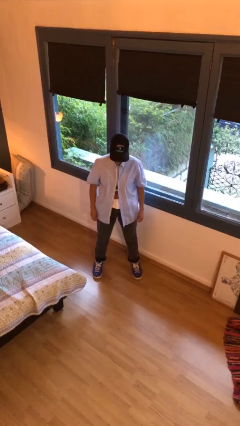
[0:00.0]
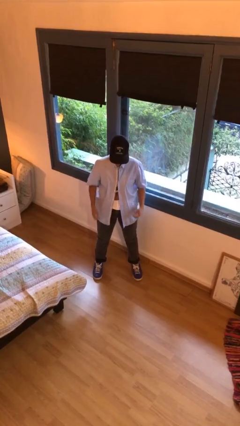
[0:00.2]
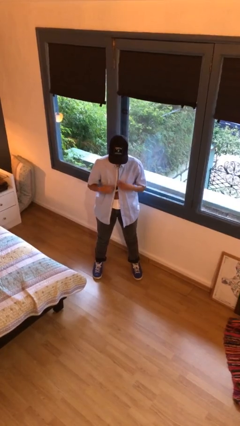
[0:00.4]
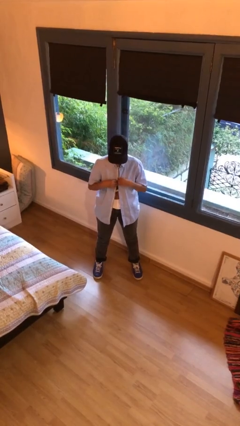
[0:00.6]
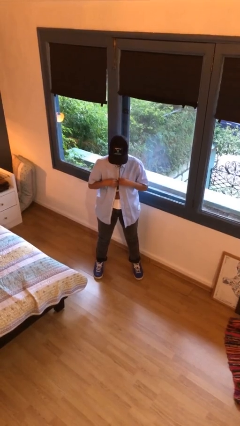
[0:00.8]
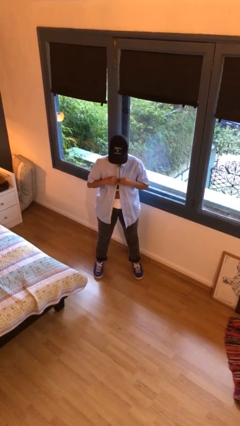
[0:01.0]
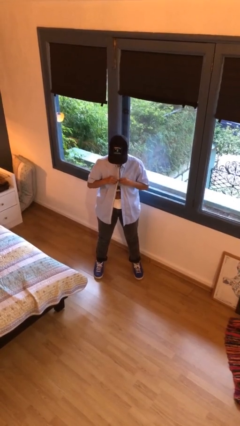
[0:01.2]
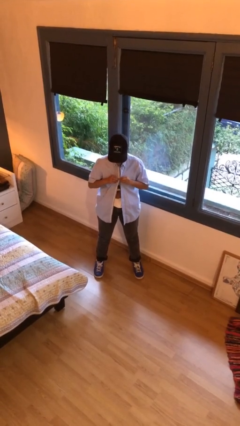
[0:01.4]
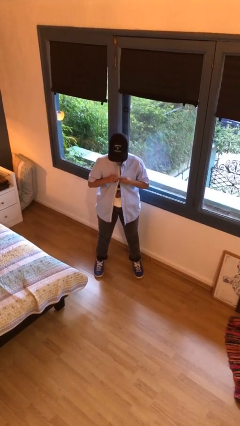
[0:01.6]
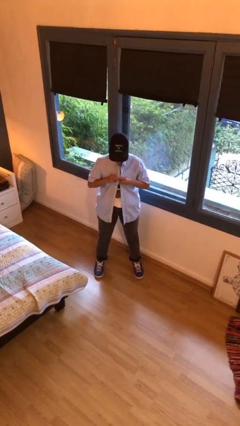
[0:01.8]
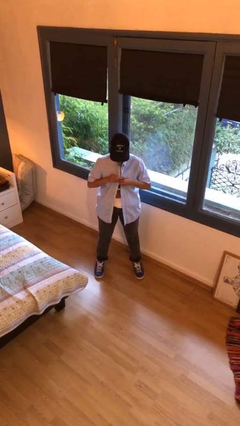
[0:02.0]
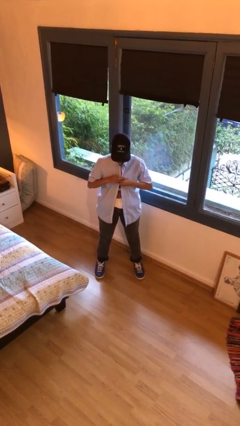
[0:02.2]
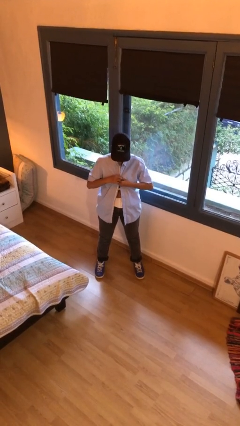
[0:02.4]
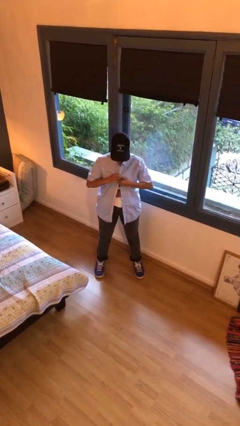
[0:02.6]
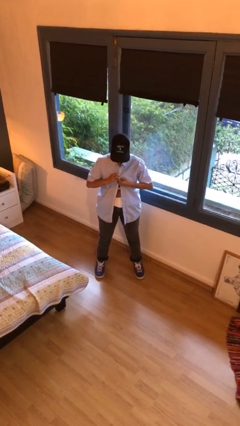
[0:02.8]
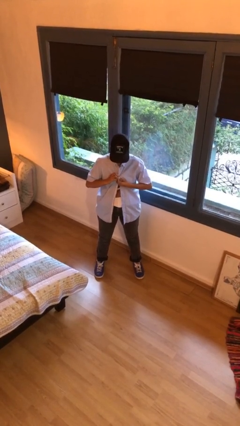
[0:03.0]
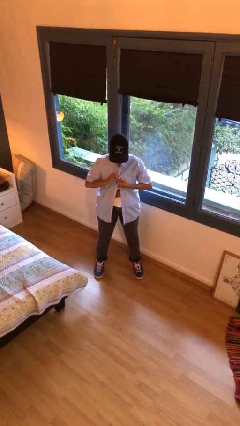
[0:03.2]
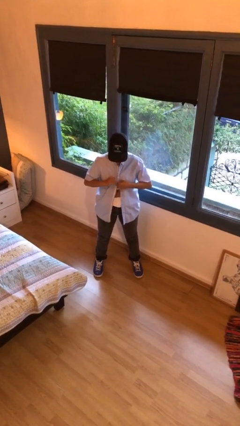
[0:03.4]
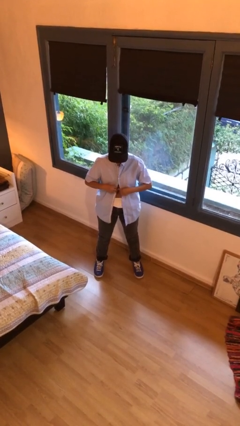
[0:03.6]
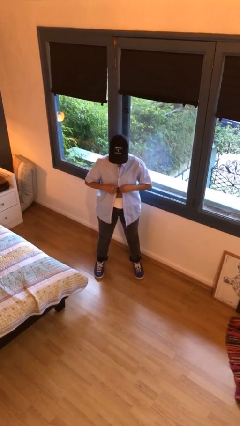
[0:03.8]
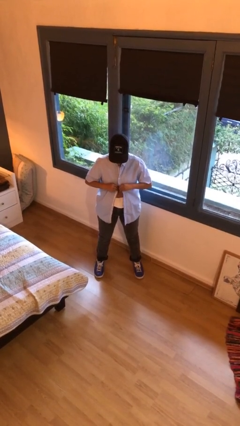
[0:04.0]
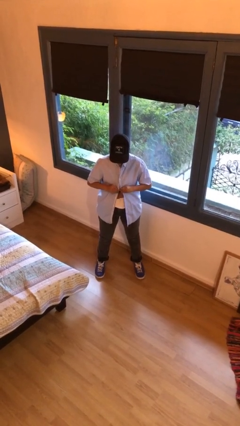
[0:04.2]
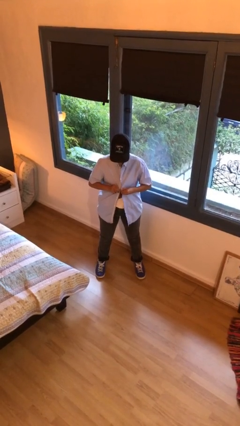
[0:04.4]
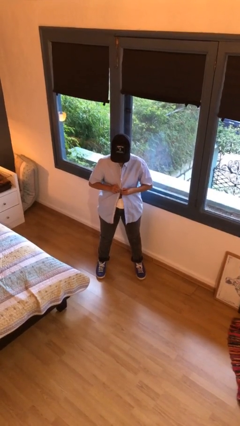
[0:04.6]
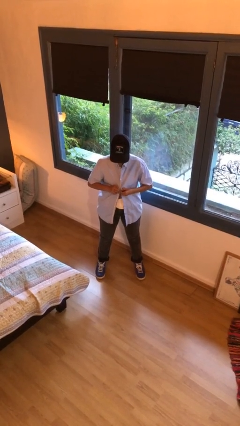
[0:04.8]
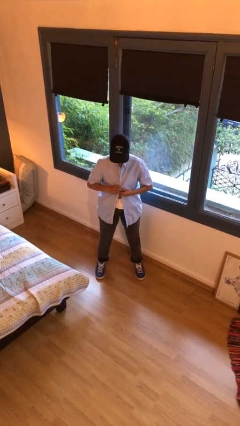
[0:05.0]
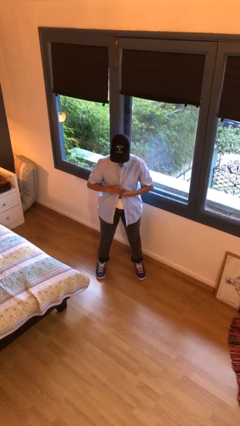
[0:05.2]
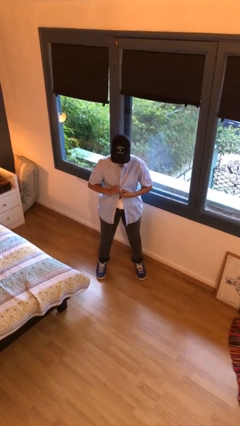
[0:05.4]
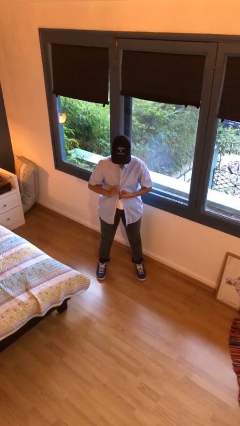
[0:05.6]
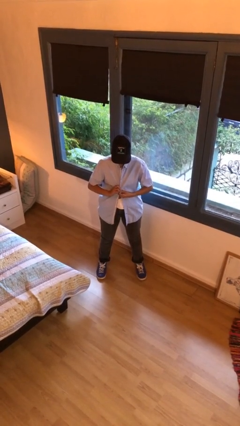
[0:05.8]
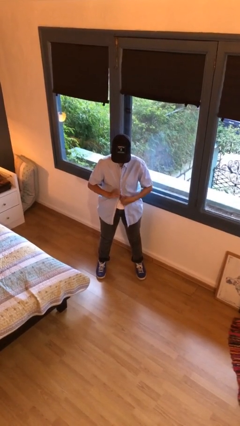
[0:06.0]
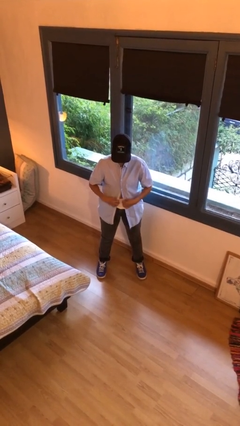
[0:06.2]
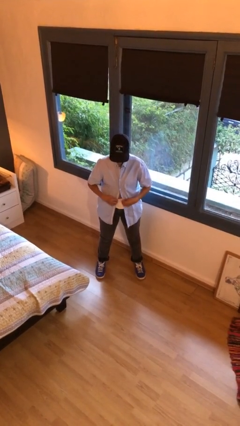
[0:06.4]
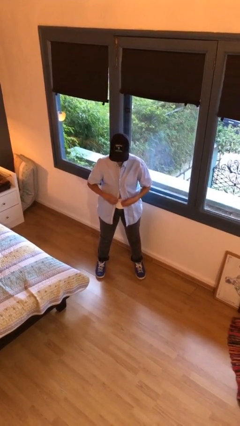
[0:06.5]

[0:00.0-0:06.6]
person buttons shirt

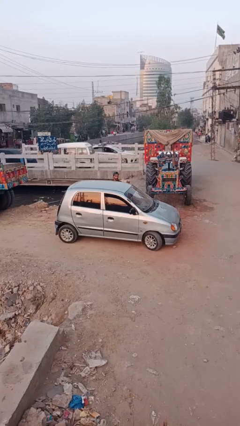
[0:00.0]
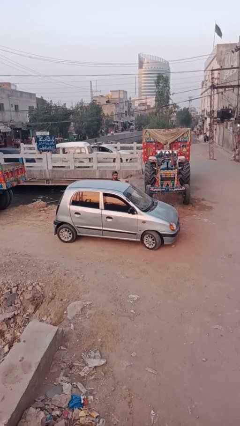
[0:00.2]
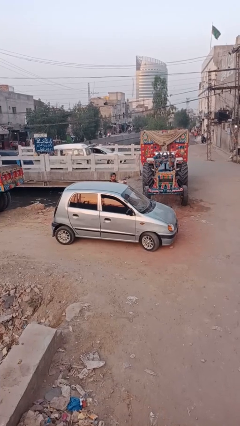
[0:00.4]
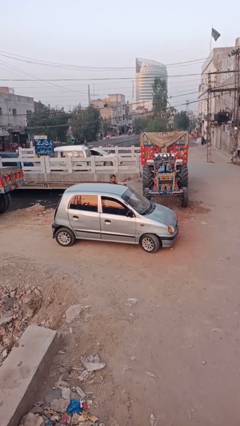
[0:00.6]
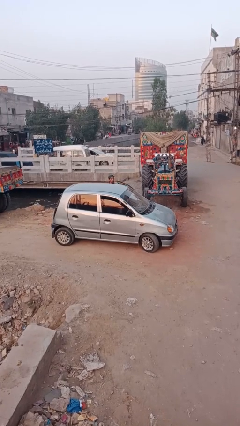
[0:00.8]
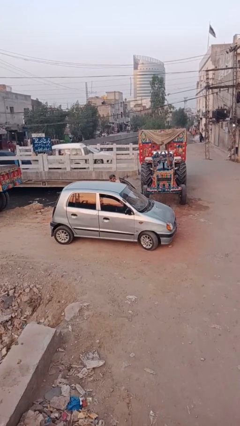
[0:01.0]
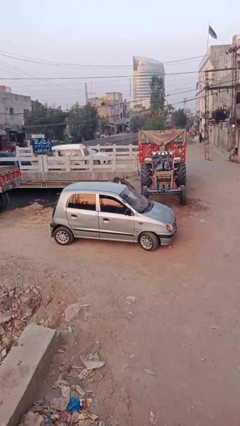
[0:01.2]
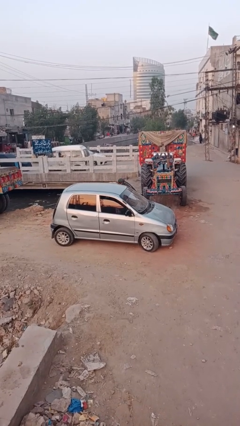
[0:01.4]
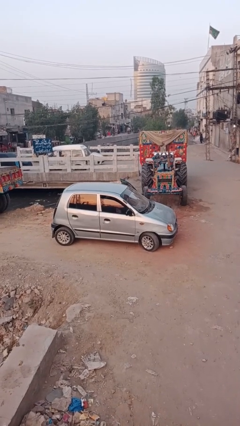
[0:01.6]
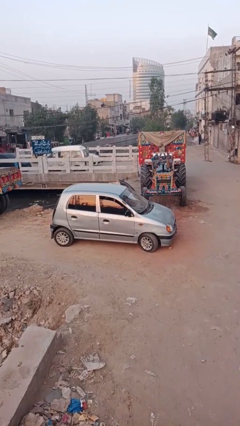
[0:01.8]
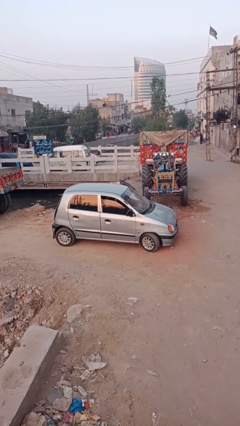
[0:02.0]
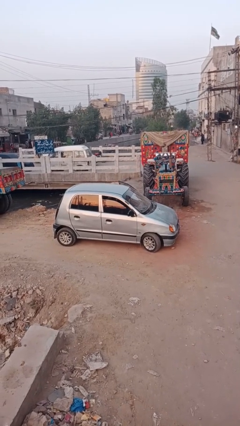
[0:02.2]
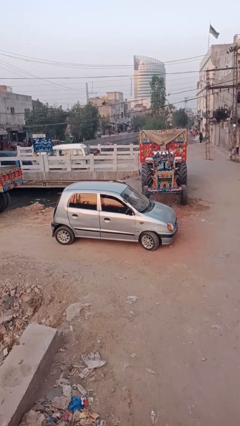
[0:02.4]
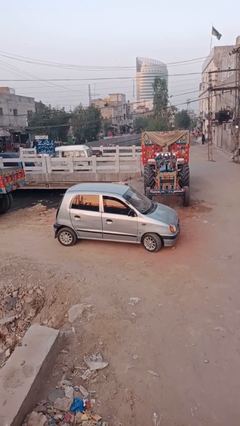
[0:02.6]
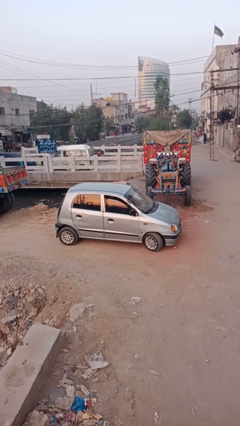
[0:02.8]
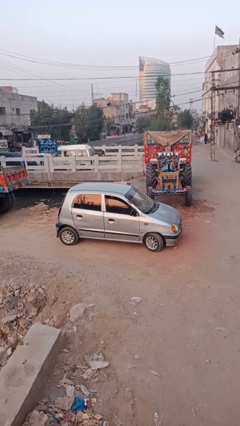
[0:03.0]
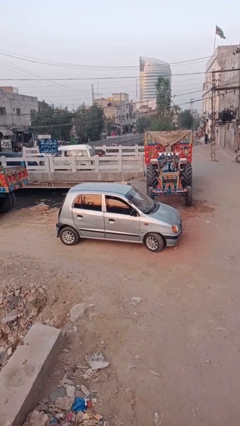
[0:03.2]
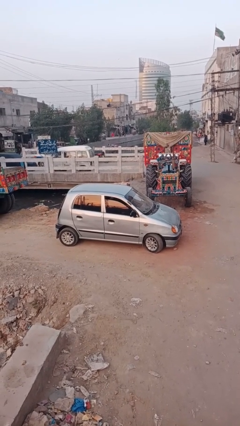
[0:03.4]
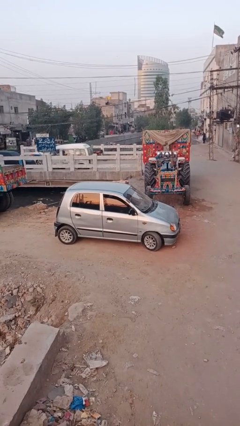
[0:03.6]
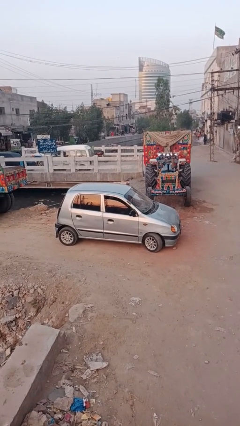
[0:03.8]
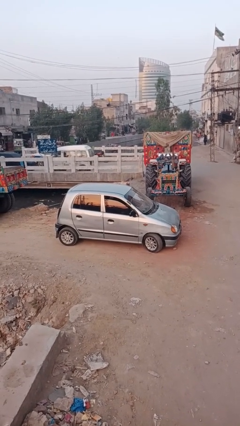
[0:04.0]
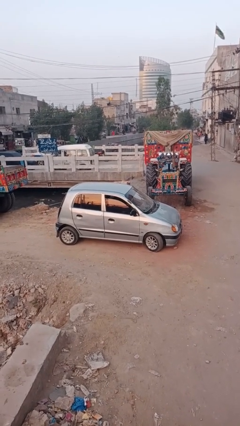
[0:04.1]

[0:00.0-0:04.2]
car picks up person

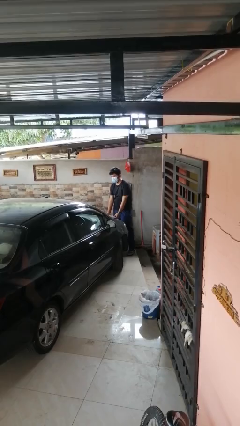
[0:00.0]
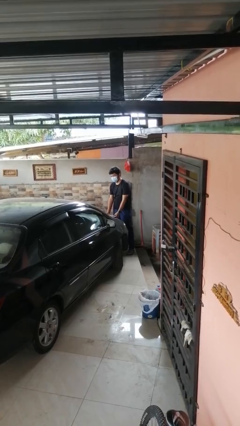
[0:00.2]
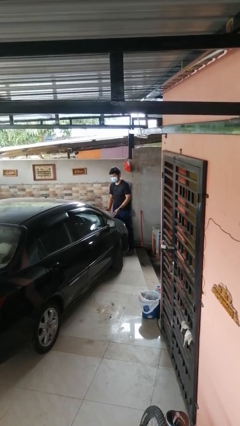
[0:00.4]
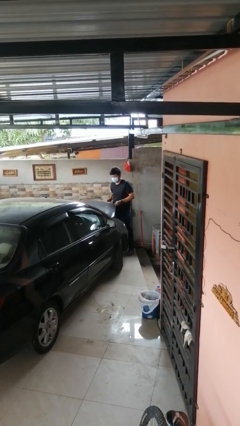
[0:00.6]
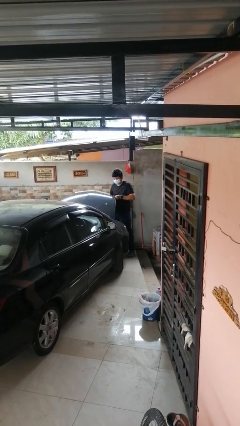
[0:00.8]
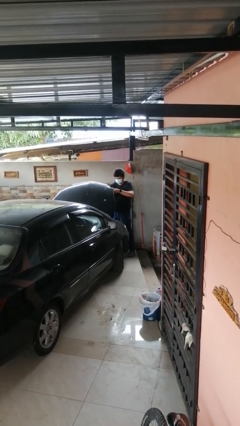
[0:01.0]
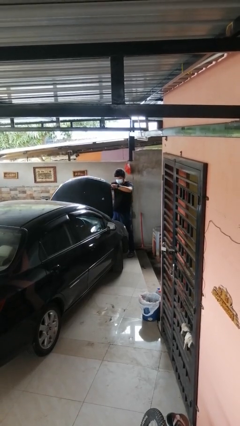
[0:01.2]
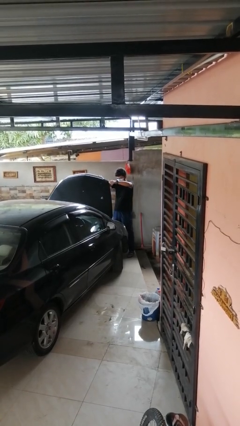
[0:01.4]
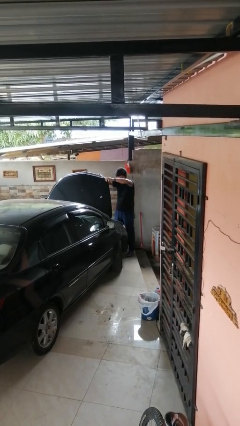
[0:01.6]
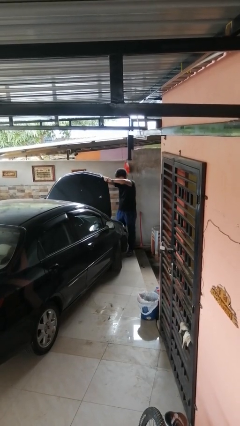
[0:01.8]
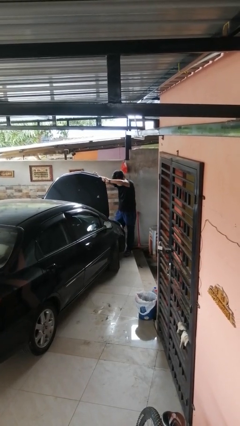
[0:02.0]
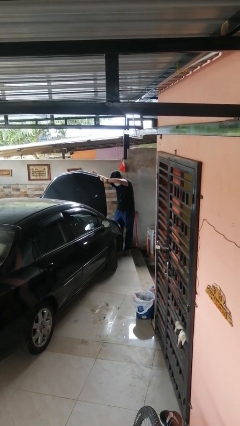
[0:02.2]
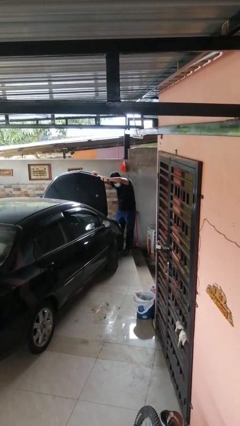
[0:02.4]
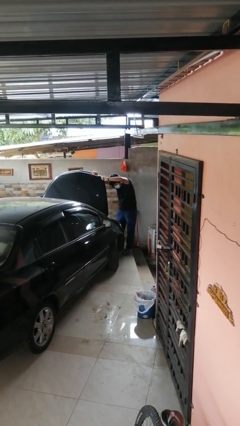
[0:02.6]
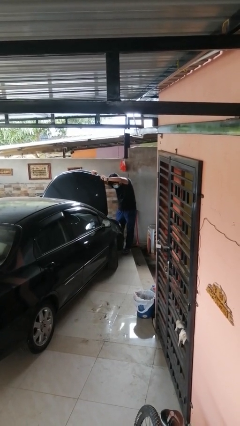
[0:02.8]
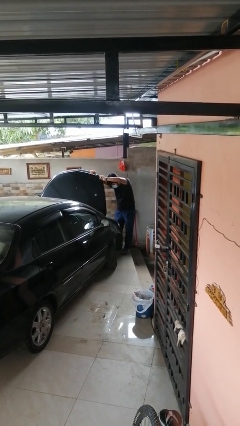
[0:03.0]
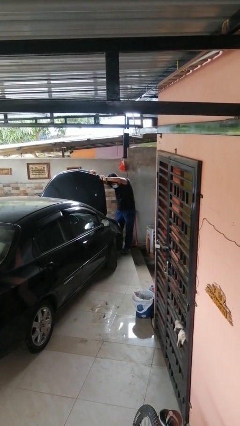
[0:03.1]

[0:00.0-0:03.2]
person opens car hood

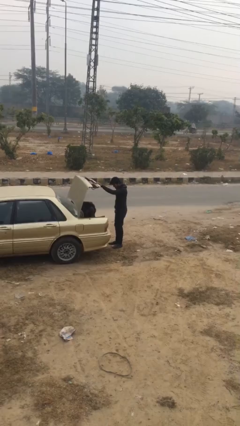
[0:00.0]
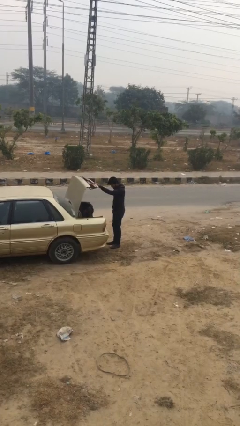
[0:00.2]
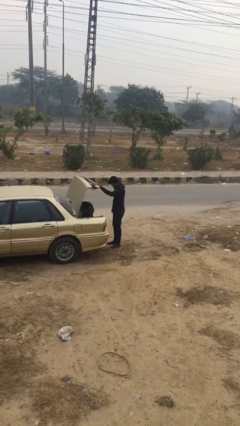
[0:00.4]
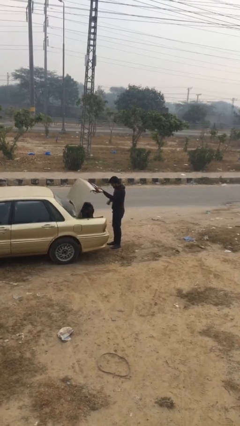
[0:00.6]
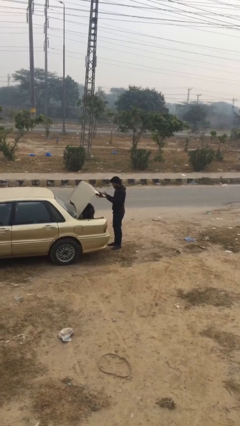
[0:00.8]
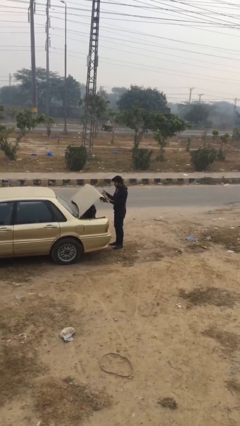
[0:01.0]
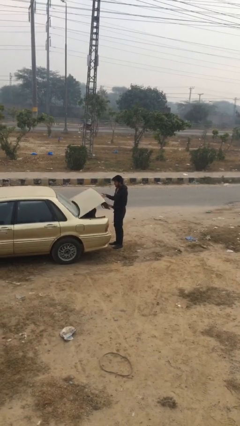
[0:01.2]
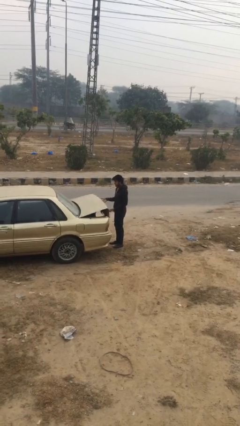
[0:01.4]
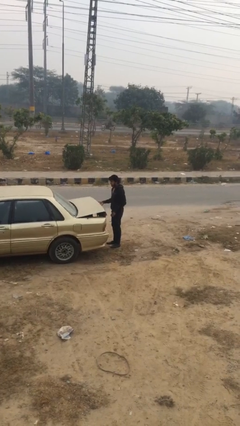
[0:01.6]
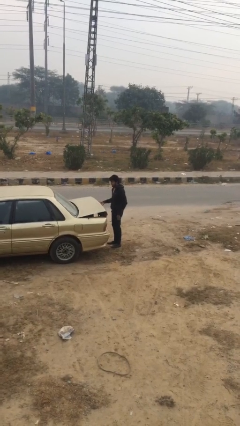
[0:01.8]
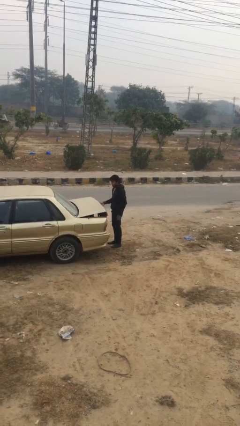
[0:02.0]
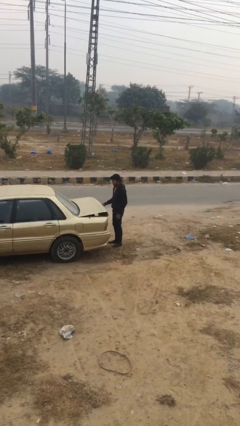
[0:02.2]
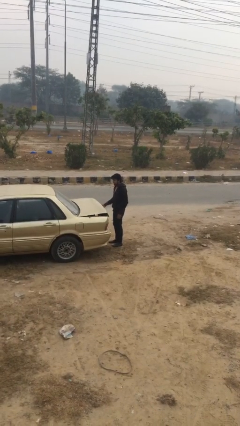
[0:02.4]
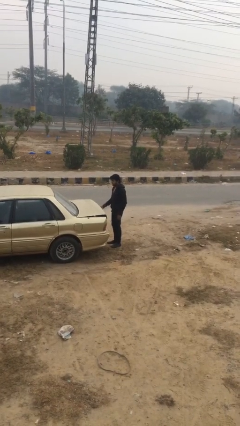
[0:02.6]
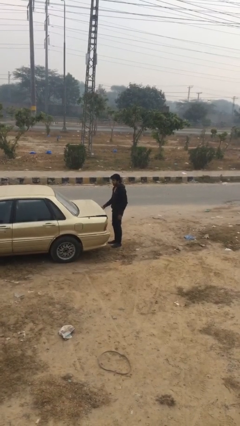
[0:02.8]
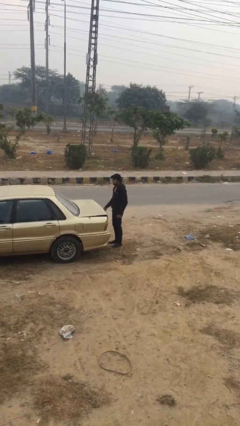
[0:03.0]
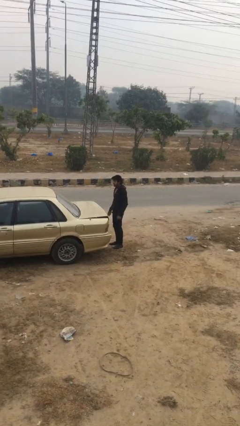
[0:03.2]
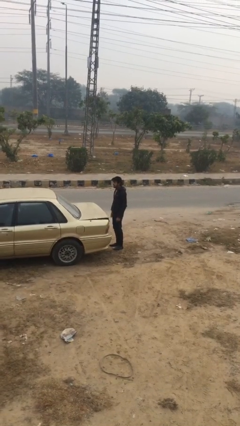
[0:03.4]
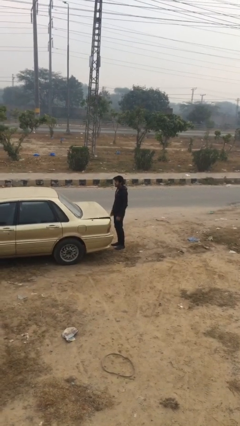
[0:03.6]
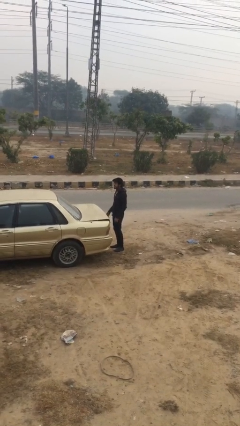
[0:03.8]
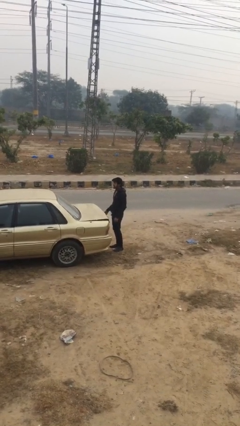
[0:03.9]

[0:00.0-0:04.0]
person closes car trunk
